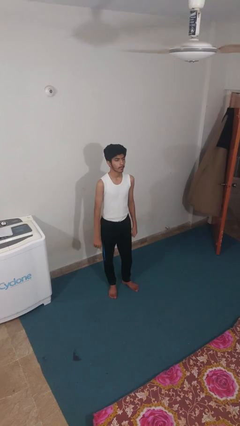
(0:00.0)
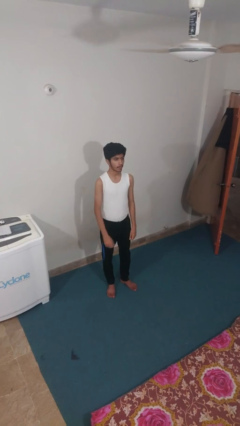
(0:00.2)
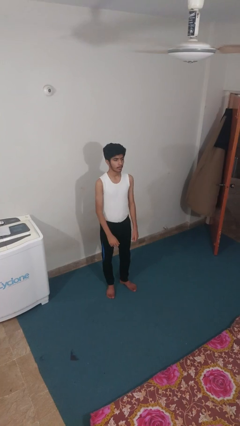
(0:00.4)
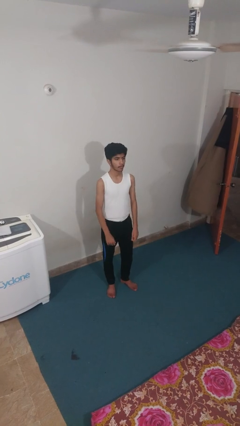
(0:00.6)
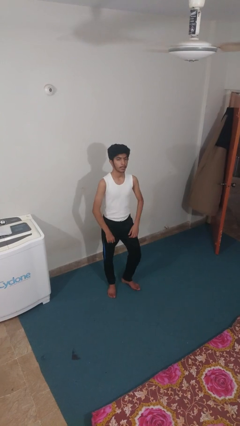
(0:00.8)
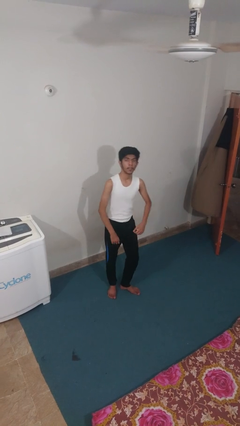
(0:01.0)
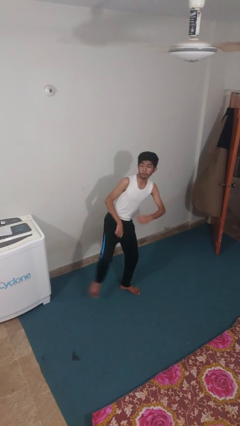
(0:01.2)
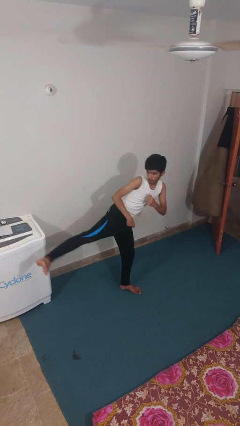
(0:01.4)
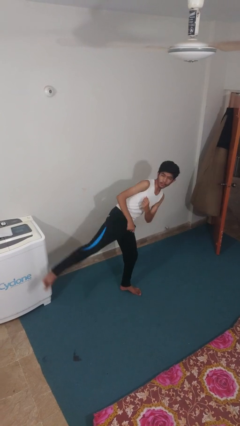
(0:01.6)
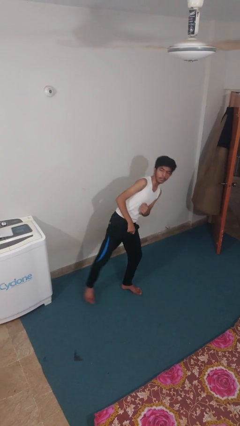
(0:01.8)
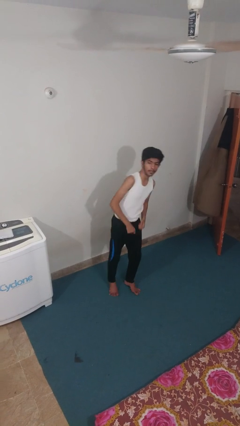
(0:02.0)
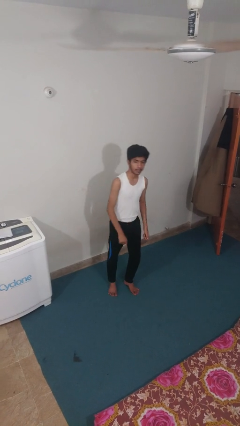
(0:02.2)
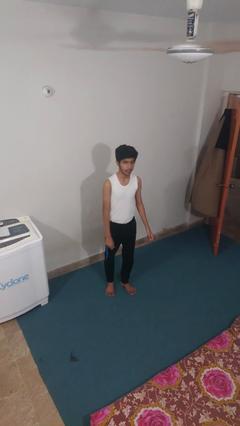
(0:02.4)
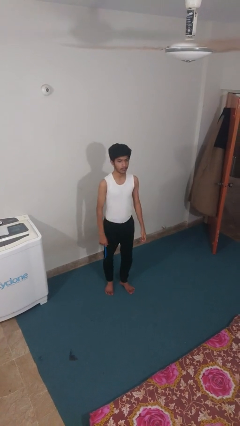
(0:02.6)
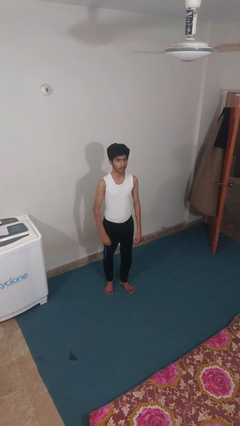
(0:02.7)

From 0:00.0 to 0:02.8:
person karate kicks

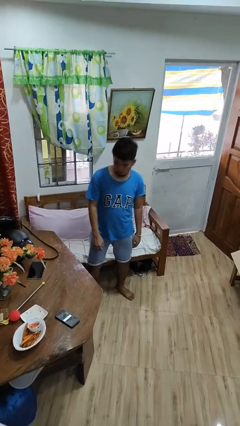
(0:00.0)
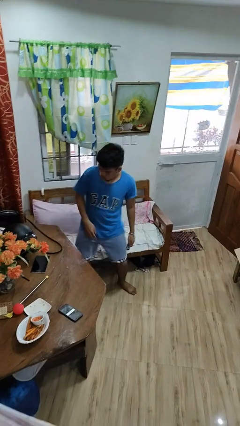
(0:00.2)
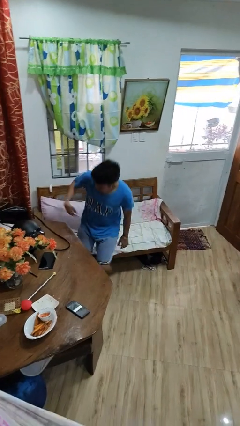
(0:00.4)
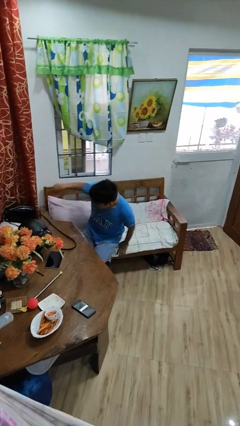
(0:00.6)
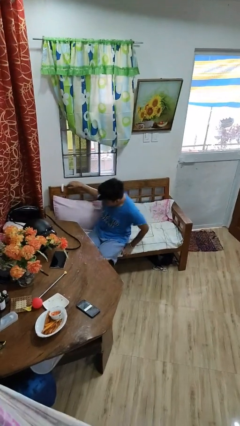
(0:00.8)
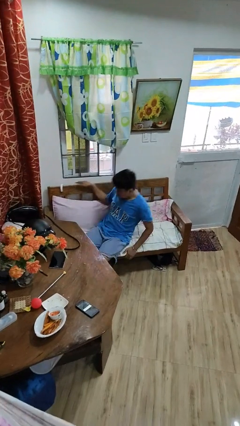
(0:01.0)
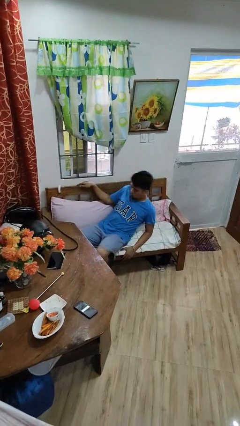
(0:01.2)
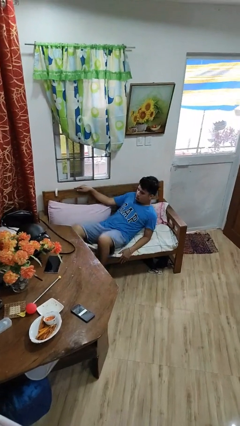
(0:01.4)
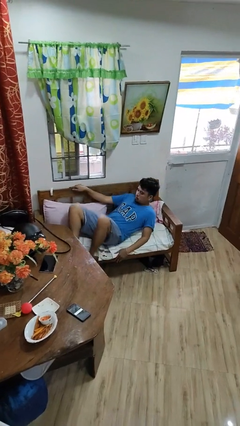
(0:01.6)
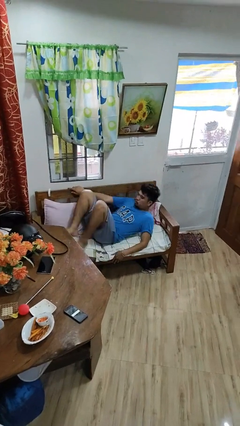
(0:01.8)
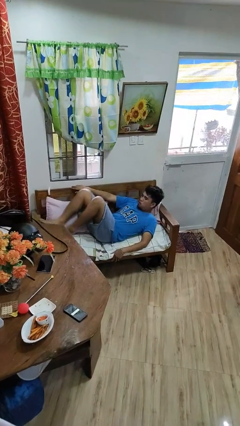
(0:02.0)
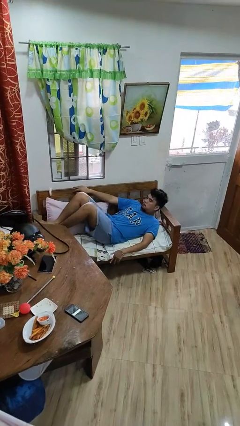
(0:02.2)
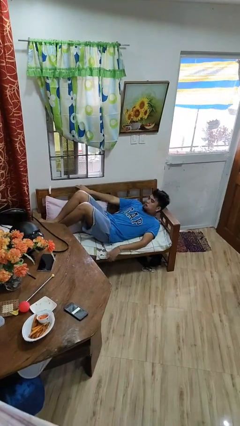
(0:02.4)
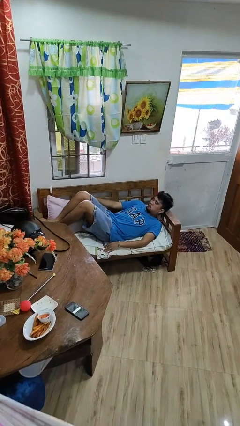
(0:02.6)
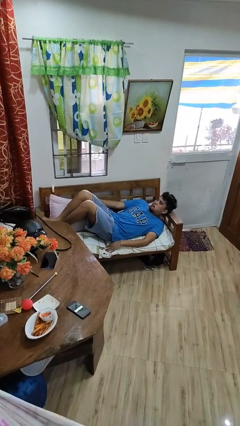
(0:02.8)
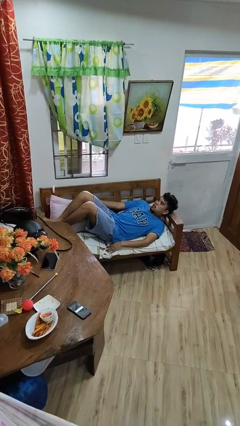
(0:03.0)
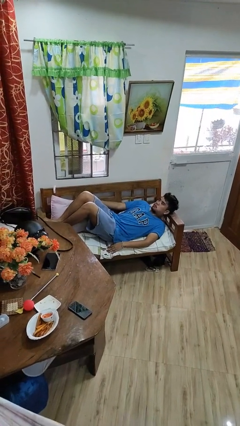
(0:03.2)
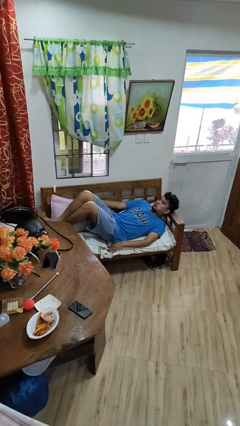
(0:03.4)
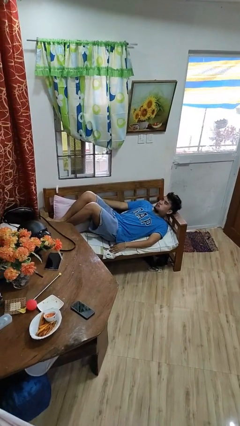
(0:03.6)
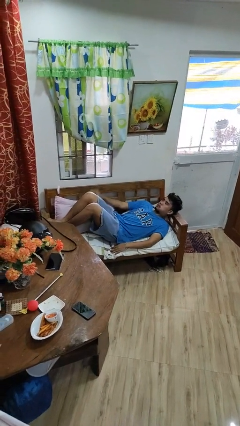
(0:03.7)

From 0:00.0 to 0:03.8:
person lies down on couch

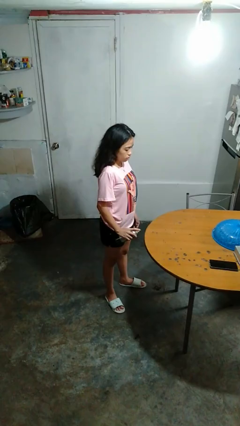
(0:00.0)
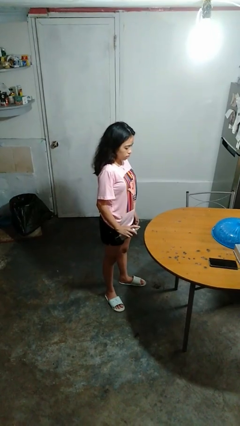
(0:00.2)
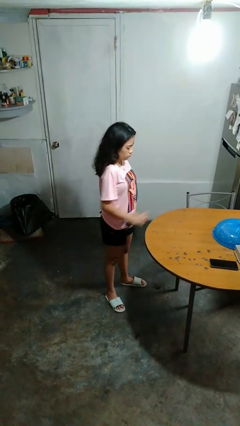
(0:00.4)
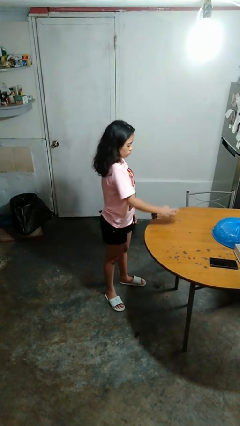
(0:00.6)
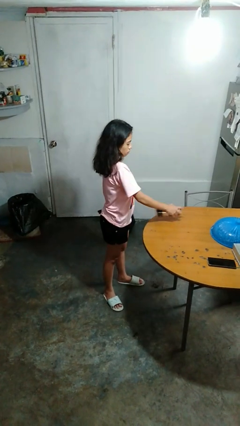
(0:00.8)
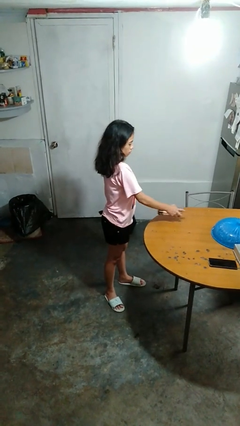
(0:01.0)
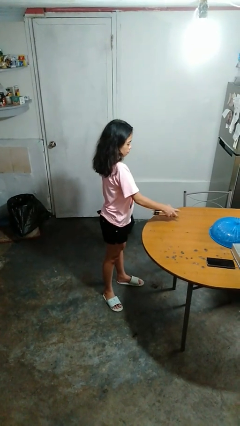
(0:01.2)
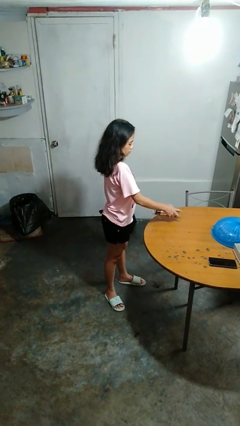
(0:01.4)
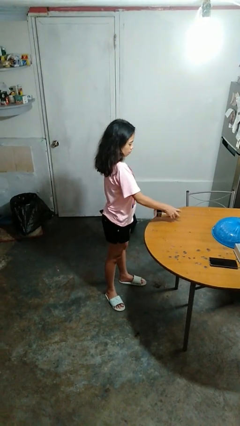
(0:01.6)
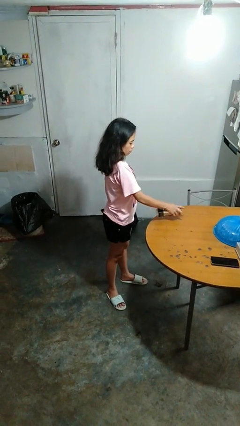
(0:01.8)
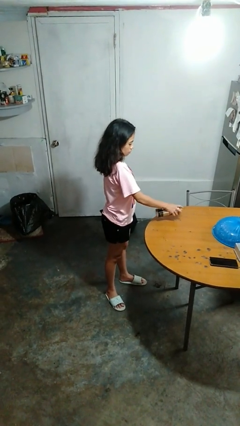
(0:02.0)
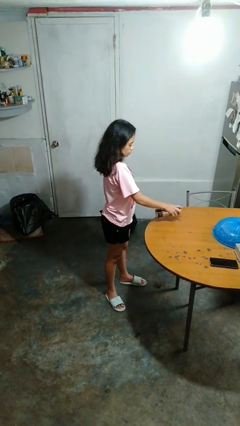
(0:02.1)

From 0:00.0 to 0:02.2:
person sprays from bottle

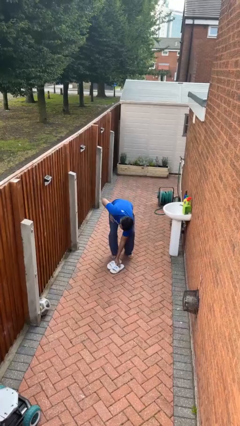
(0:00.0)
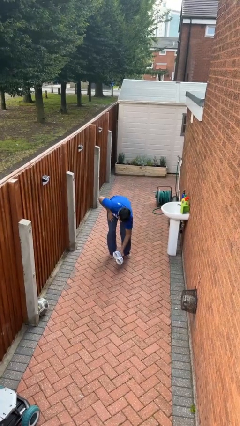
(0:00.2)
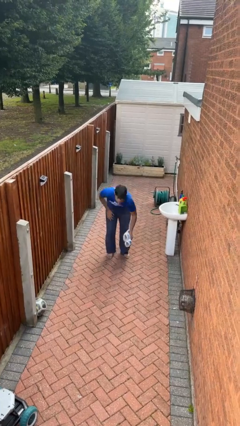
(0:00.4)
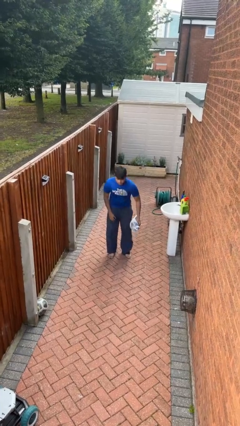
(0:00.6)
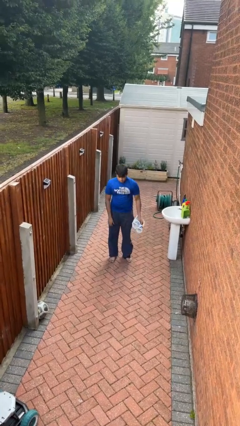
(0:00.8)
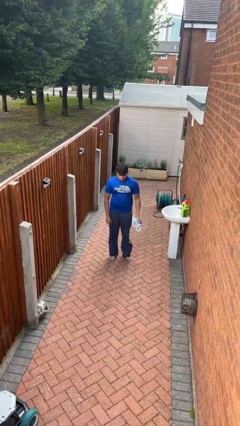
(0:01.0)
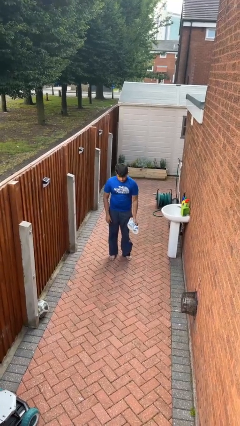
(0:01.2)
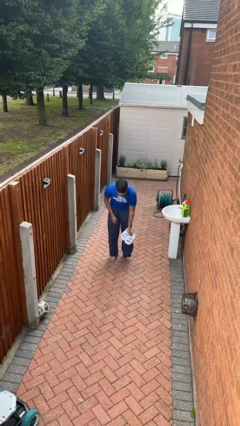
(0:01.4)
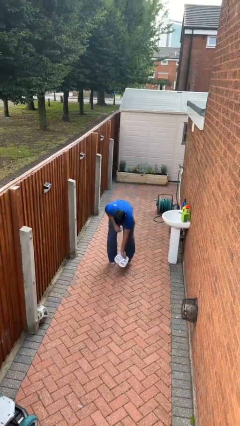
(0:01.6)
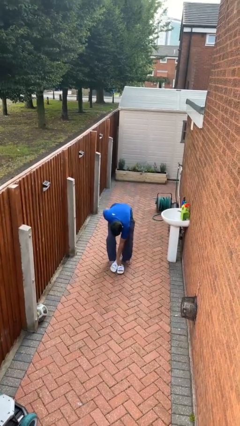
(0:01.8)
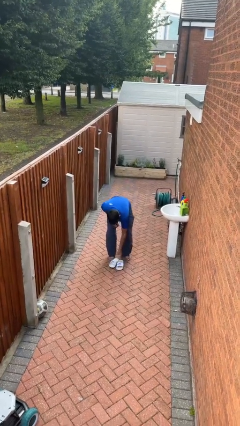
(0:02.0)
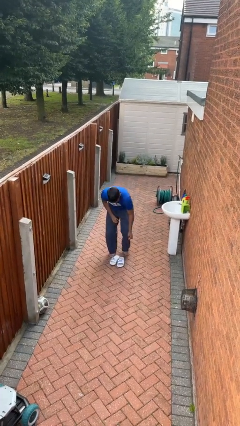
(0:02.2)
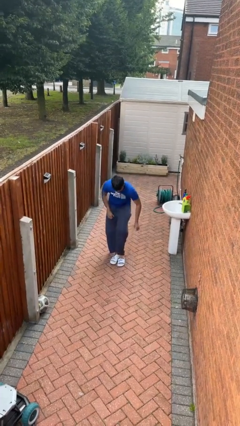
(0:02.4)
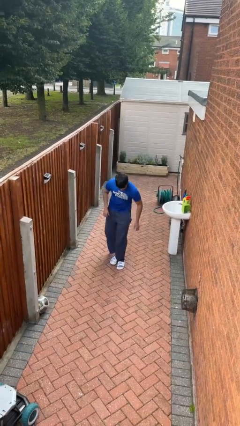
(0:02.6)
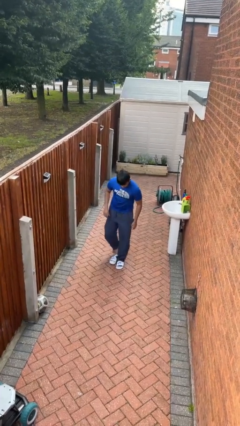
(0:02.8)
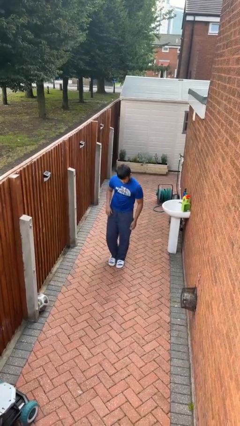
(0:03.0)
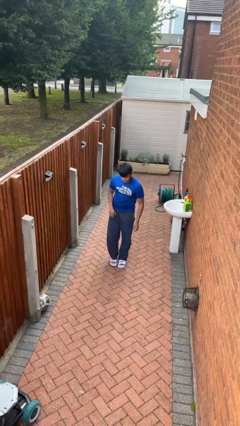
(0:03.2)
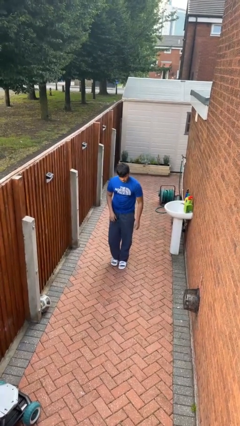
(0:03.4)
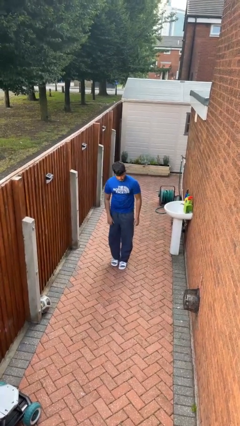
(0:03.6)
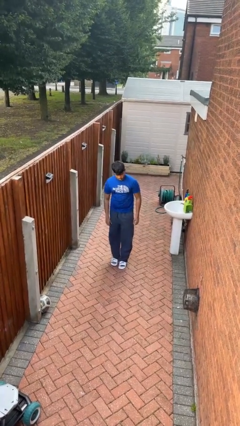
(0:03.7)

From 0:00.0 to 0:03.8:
person puts on shoes

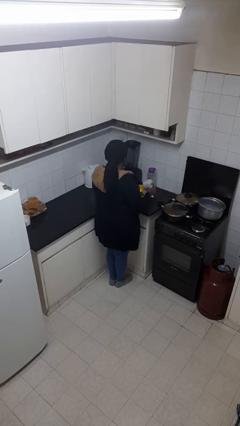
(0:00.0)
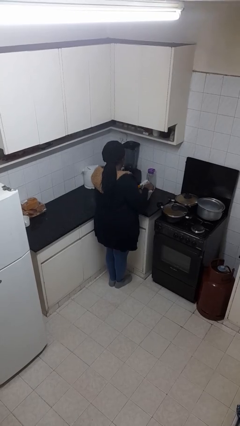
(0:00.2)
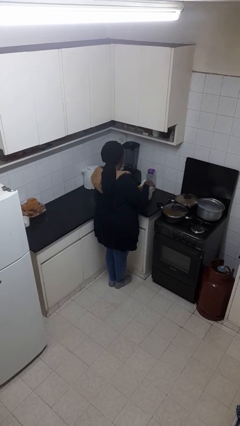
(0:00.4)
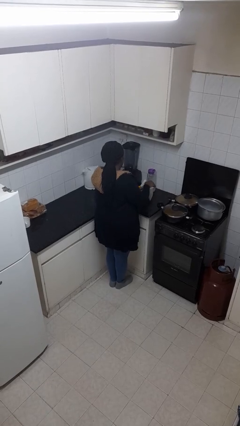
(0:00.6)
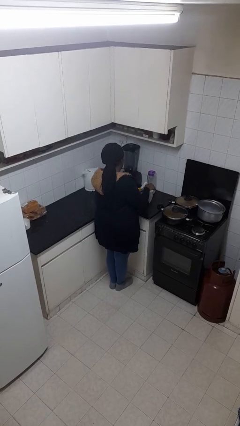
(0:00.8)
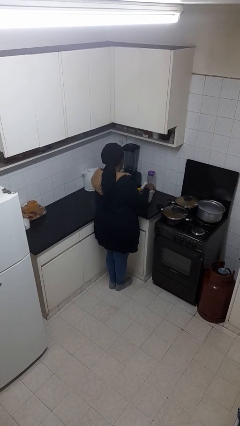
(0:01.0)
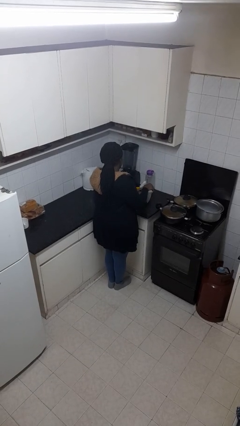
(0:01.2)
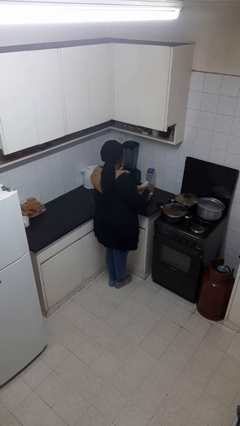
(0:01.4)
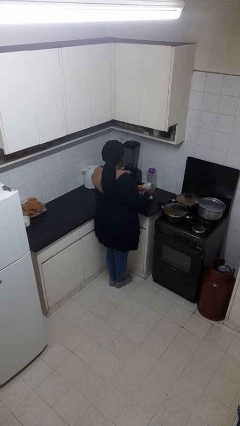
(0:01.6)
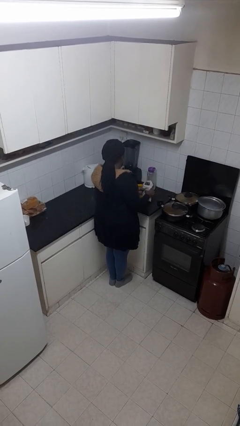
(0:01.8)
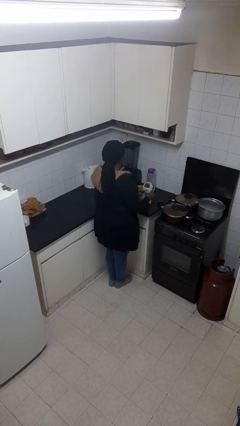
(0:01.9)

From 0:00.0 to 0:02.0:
person pours into bowl

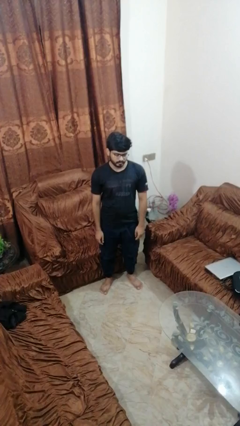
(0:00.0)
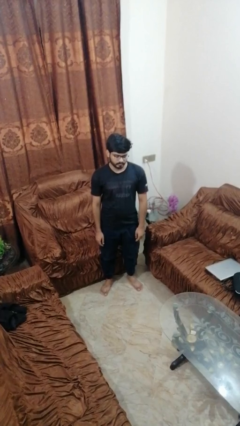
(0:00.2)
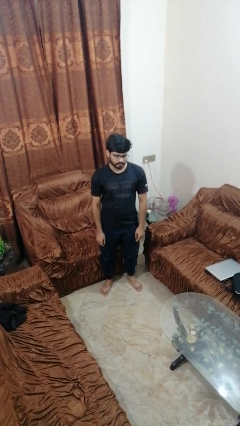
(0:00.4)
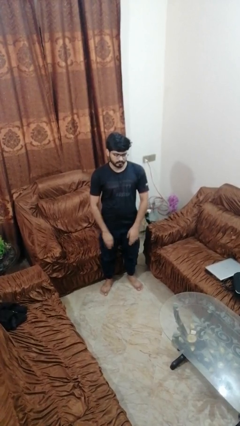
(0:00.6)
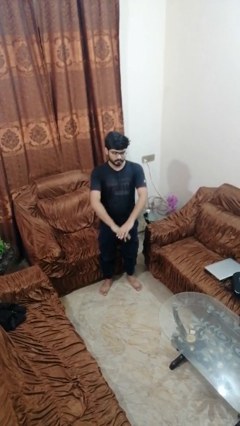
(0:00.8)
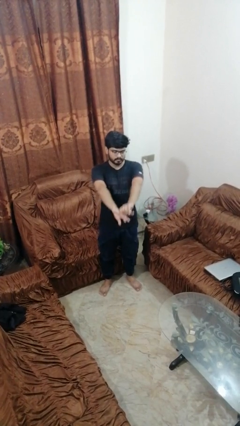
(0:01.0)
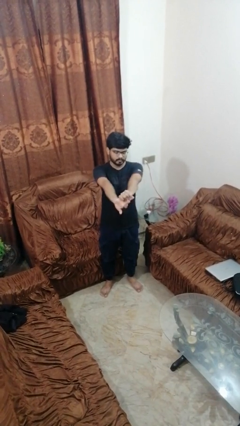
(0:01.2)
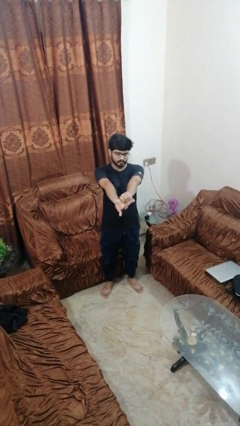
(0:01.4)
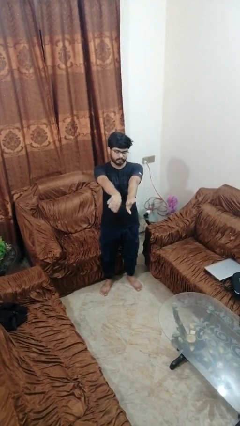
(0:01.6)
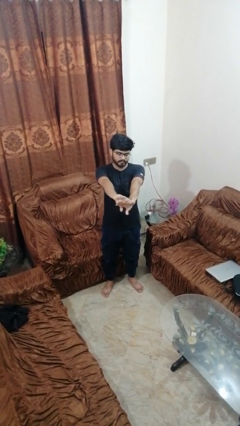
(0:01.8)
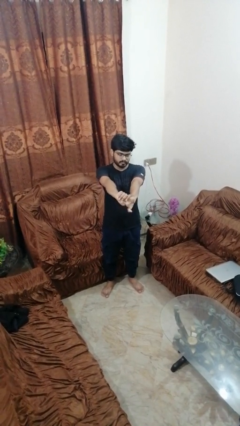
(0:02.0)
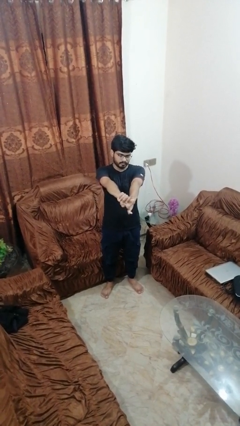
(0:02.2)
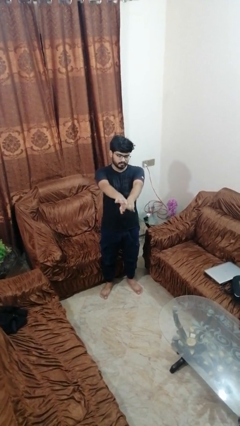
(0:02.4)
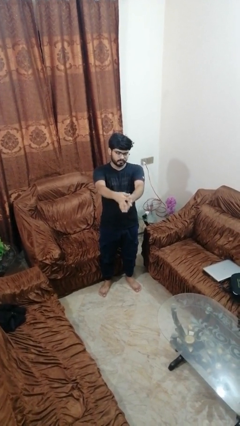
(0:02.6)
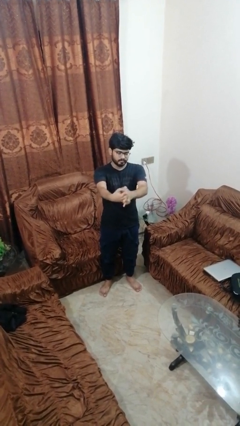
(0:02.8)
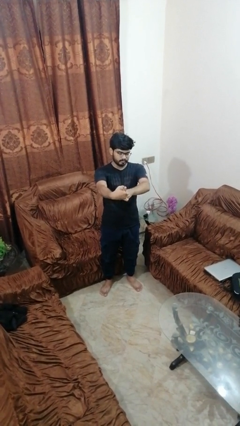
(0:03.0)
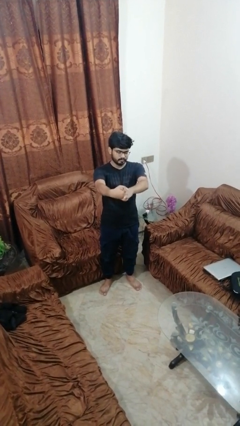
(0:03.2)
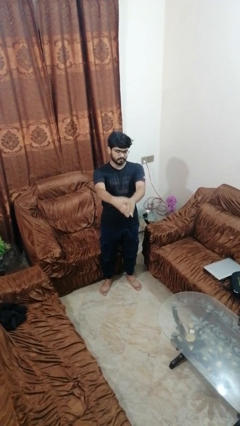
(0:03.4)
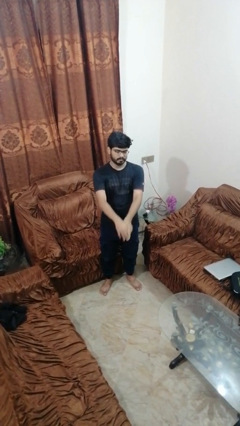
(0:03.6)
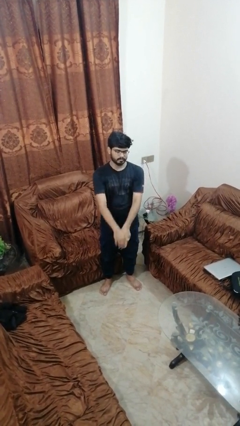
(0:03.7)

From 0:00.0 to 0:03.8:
person cracks knuckles
